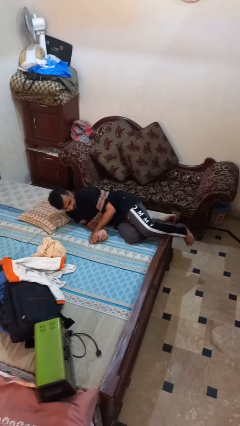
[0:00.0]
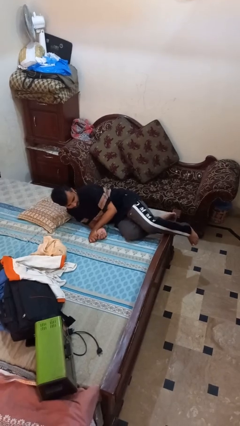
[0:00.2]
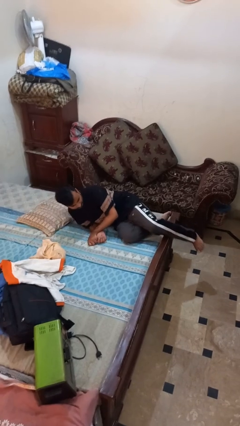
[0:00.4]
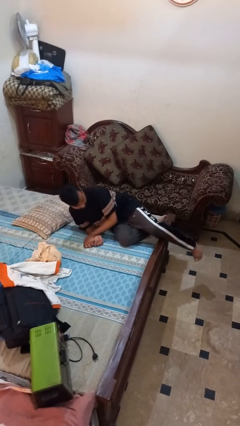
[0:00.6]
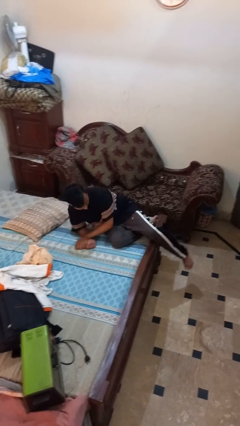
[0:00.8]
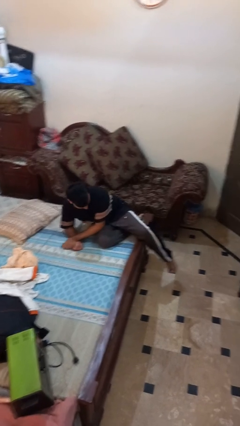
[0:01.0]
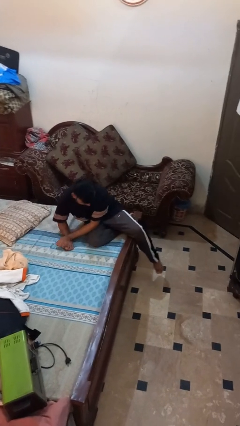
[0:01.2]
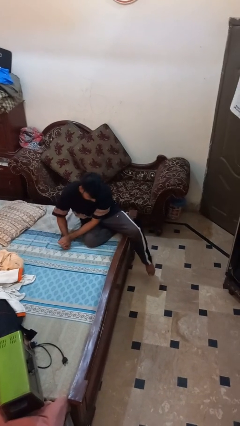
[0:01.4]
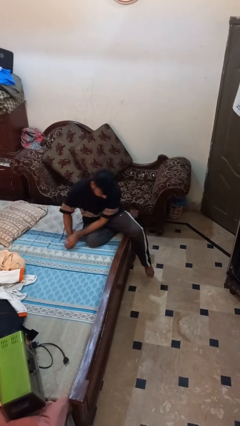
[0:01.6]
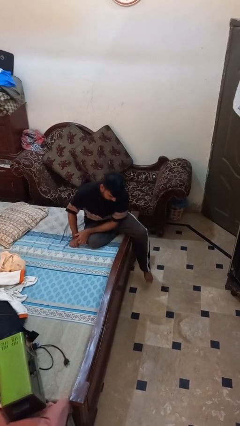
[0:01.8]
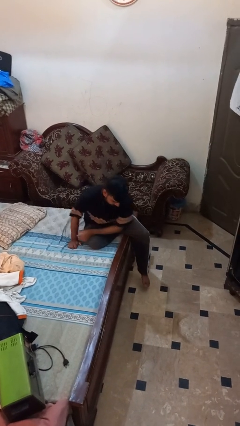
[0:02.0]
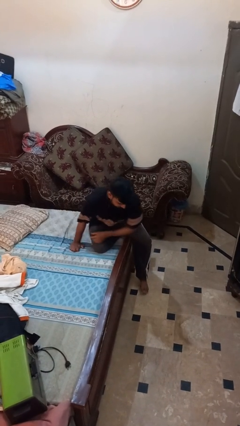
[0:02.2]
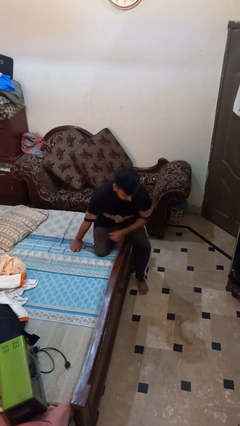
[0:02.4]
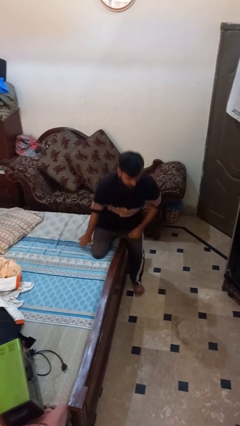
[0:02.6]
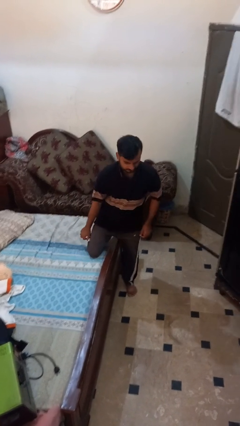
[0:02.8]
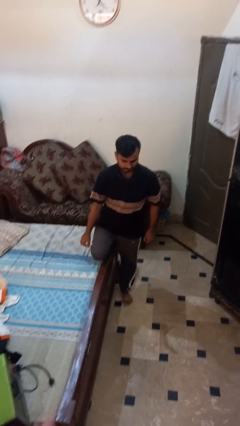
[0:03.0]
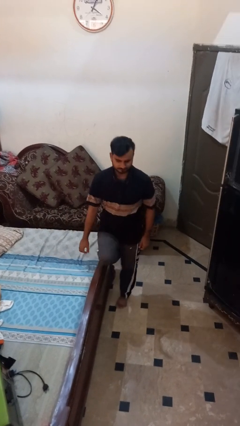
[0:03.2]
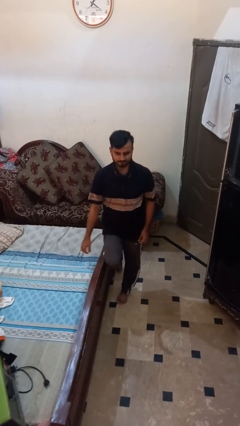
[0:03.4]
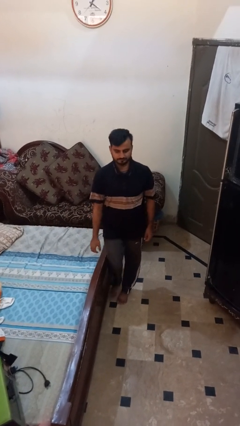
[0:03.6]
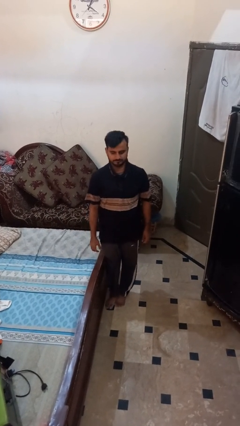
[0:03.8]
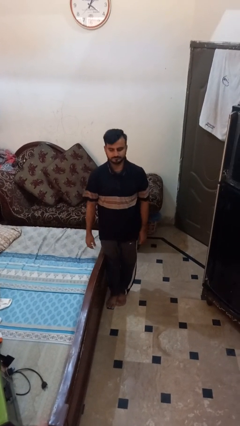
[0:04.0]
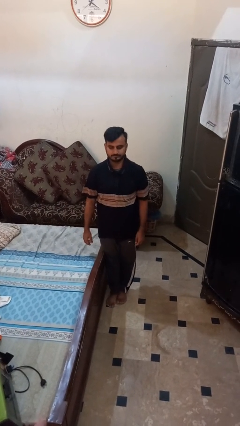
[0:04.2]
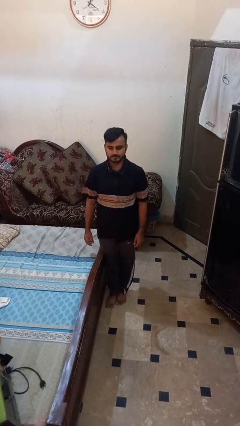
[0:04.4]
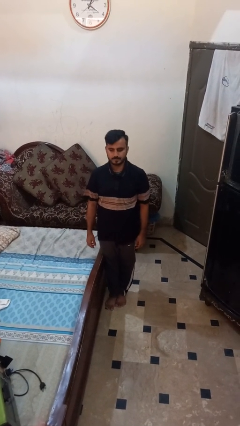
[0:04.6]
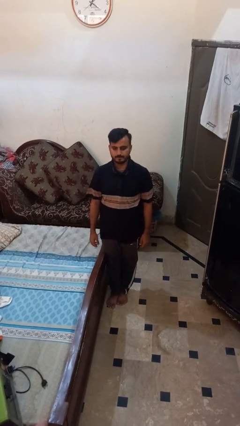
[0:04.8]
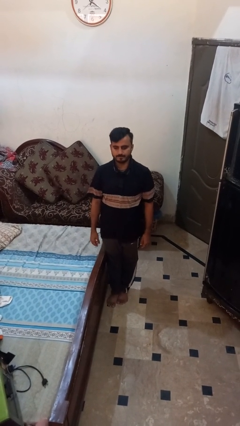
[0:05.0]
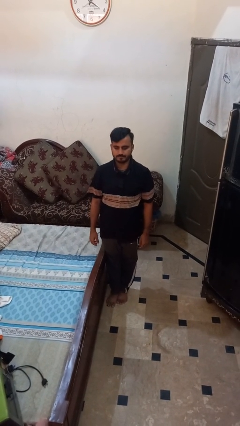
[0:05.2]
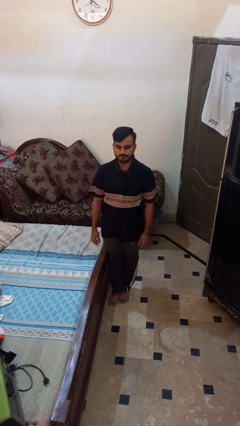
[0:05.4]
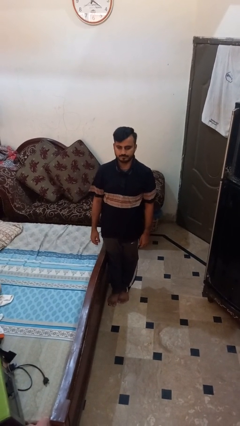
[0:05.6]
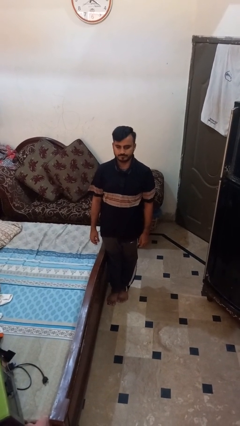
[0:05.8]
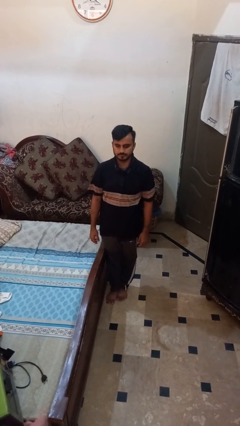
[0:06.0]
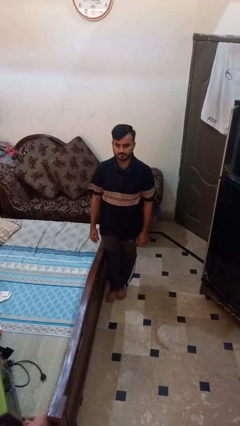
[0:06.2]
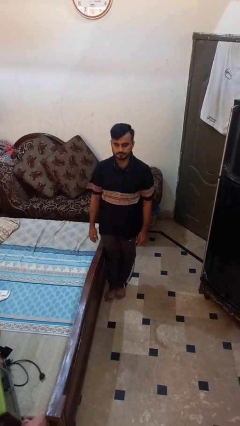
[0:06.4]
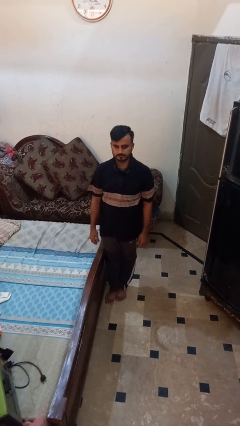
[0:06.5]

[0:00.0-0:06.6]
person stands up

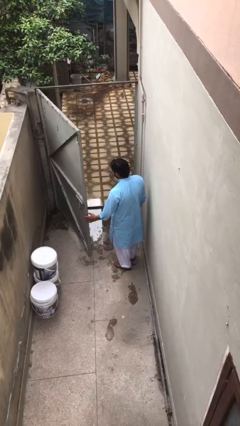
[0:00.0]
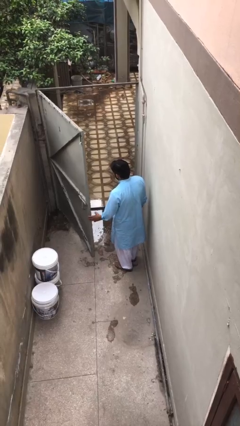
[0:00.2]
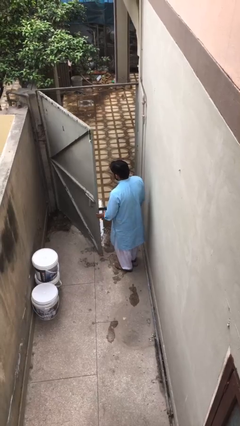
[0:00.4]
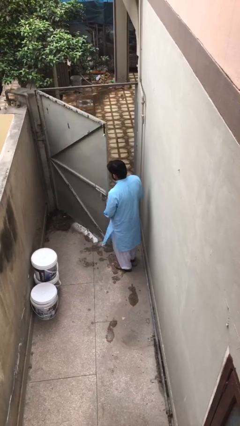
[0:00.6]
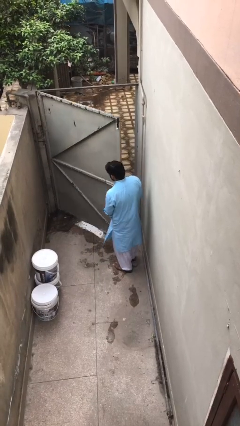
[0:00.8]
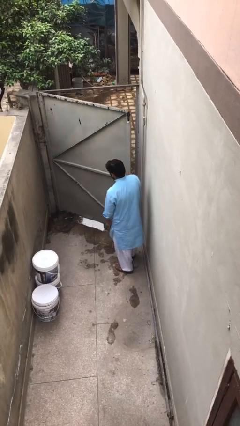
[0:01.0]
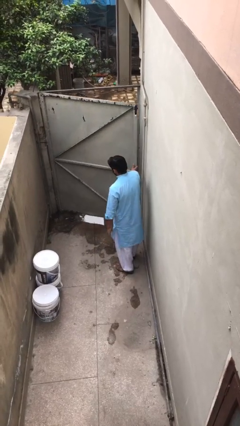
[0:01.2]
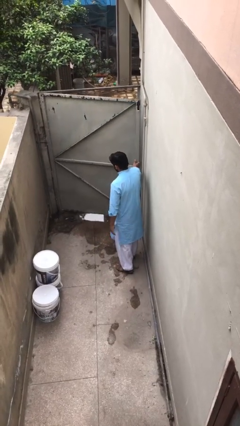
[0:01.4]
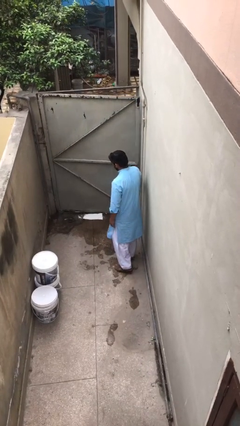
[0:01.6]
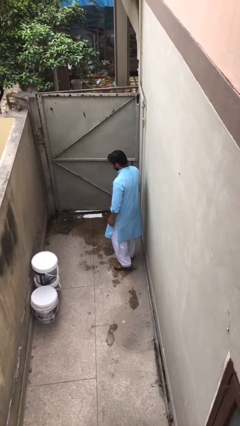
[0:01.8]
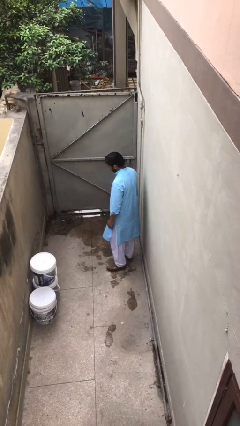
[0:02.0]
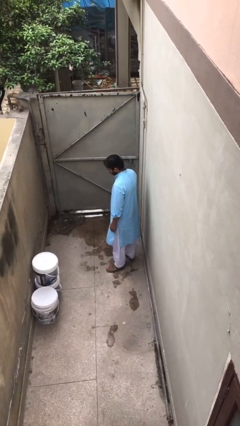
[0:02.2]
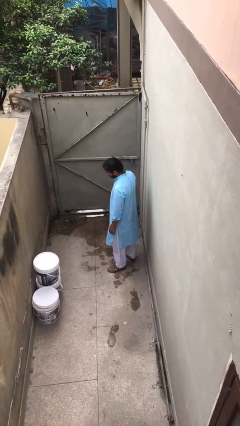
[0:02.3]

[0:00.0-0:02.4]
person closes facility door

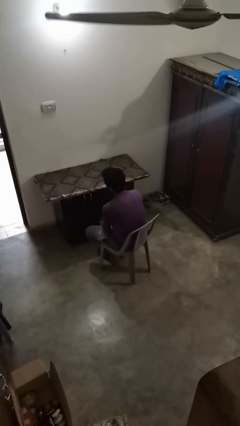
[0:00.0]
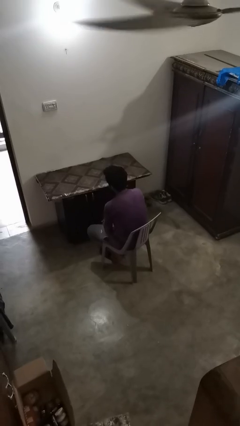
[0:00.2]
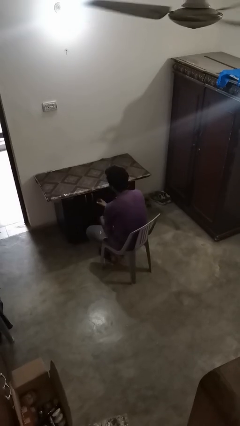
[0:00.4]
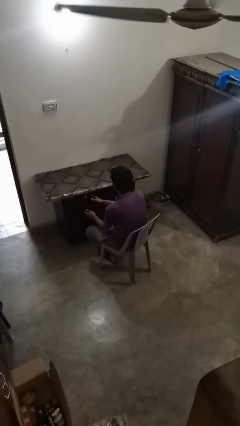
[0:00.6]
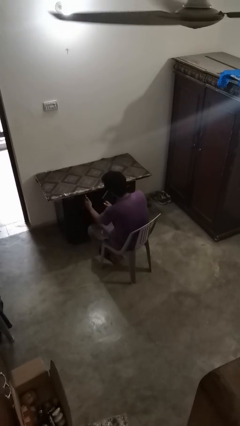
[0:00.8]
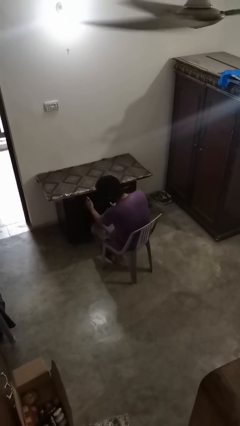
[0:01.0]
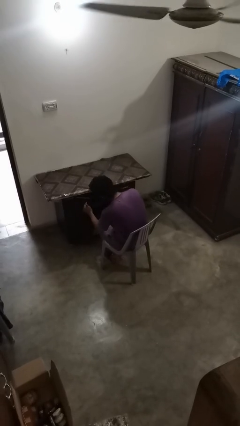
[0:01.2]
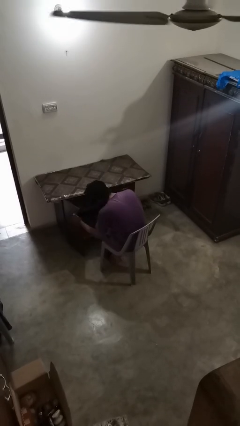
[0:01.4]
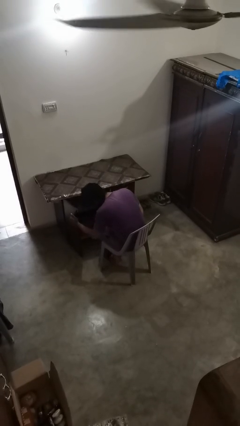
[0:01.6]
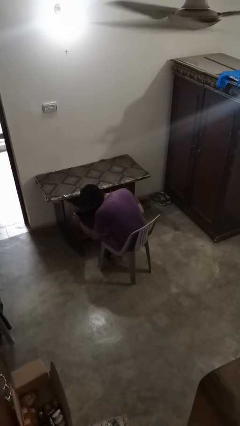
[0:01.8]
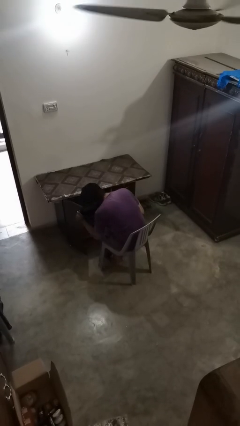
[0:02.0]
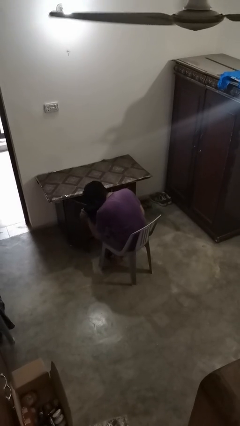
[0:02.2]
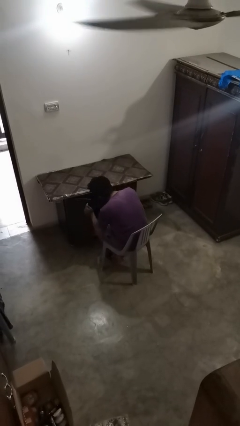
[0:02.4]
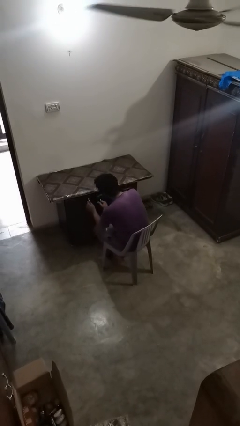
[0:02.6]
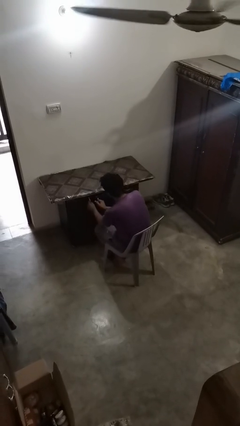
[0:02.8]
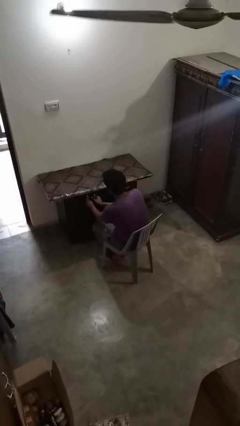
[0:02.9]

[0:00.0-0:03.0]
person sets upright furniture

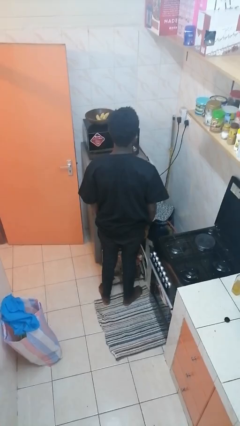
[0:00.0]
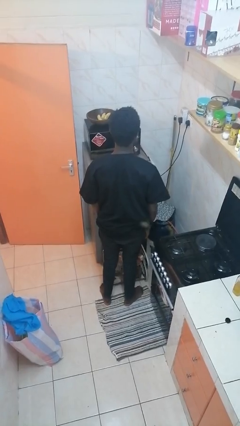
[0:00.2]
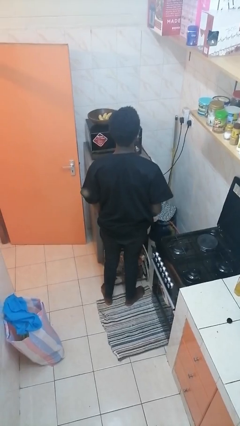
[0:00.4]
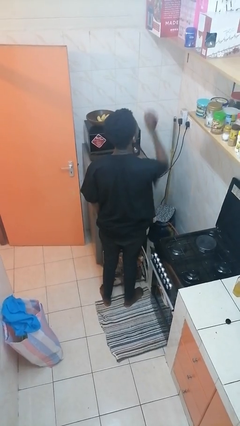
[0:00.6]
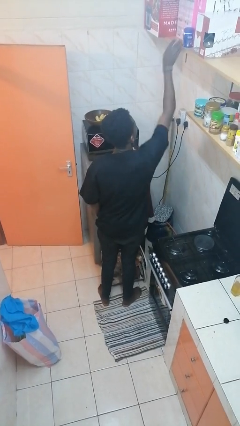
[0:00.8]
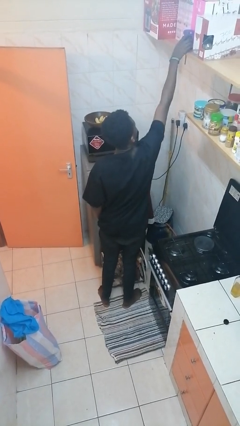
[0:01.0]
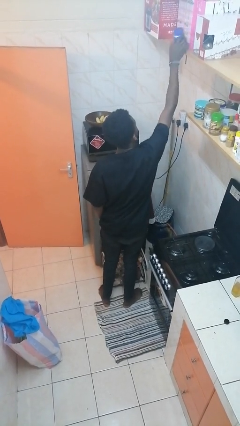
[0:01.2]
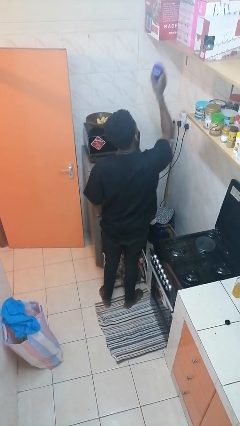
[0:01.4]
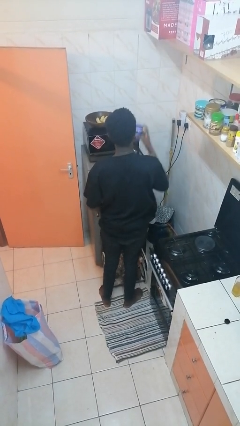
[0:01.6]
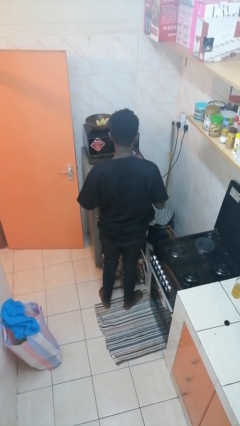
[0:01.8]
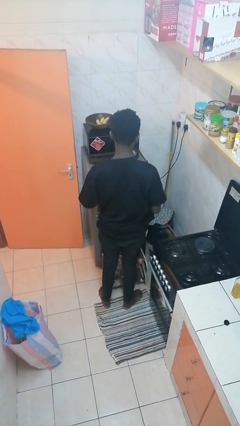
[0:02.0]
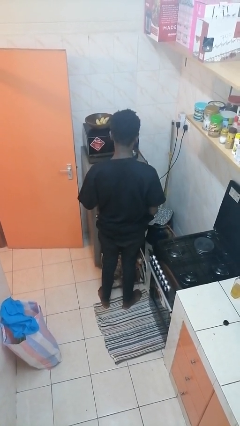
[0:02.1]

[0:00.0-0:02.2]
person picks up object from shelf

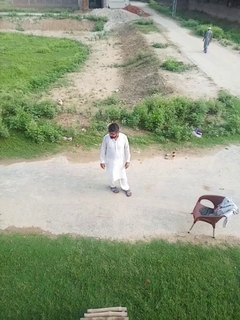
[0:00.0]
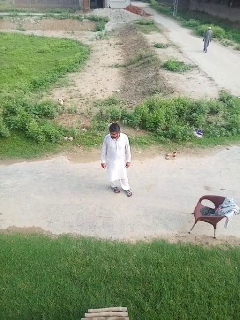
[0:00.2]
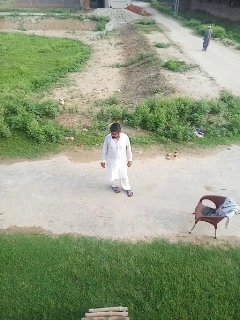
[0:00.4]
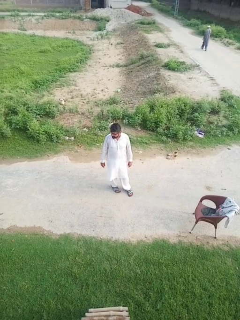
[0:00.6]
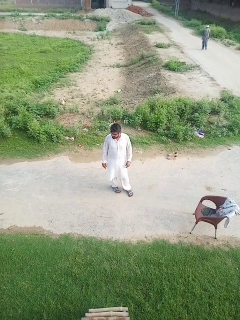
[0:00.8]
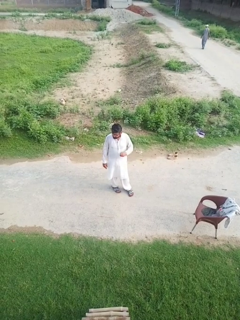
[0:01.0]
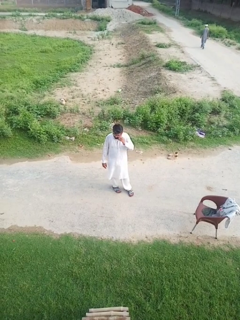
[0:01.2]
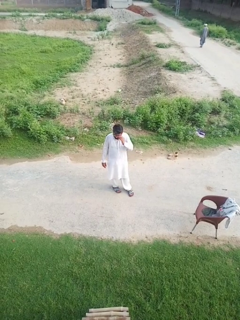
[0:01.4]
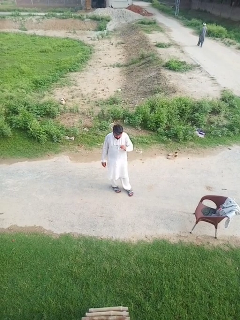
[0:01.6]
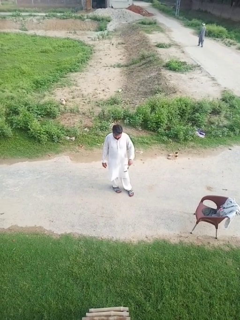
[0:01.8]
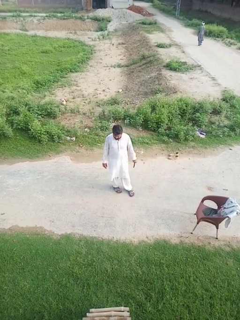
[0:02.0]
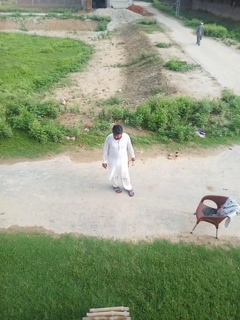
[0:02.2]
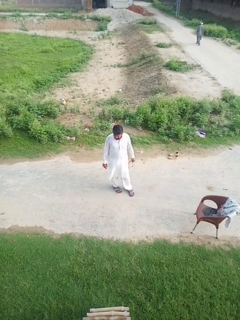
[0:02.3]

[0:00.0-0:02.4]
person takes off glasses

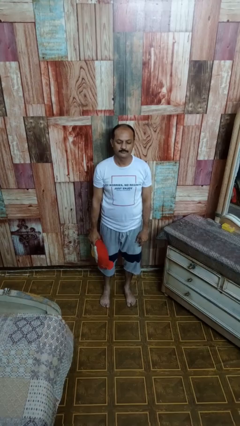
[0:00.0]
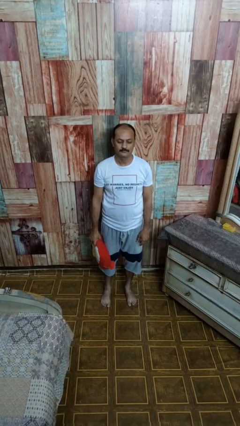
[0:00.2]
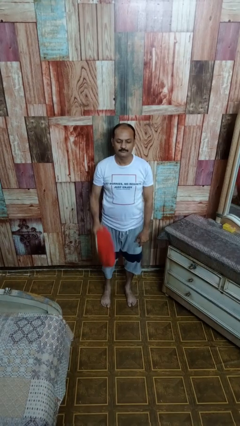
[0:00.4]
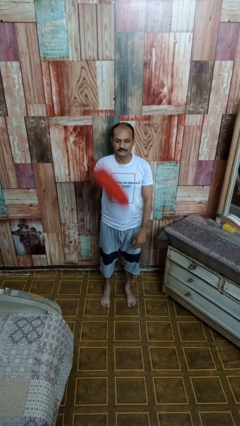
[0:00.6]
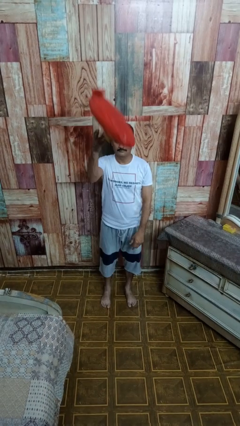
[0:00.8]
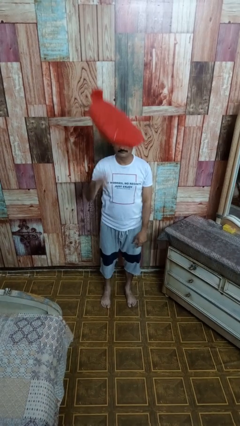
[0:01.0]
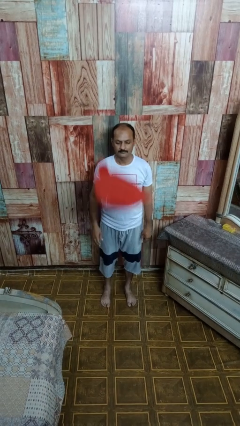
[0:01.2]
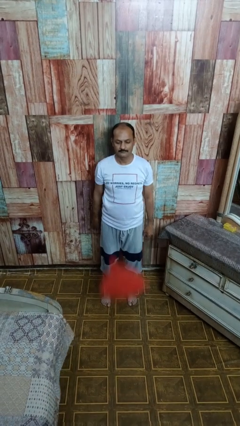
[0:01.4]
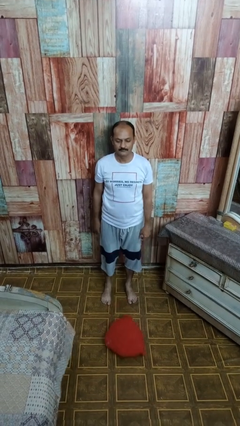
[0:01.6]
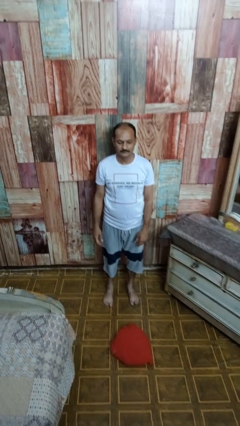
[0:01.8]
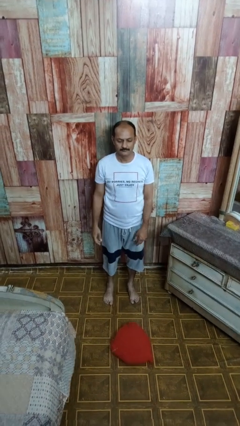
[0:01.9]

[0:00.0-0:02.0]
person throws object into air
